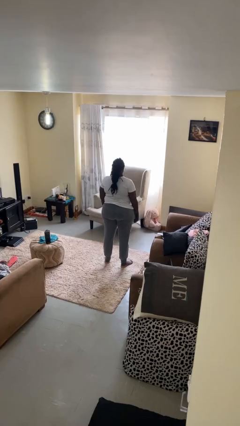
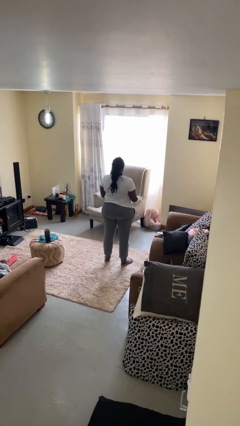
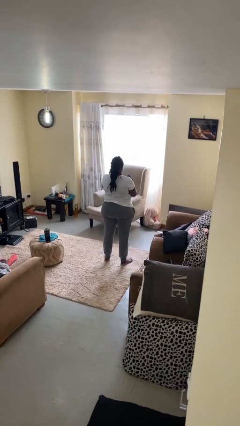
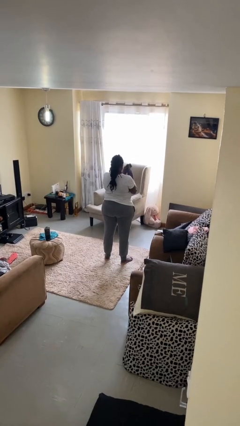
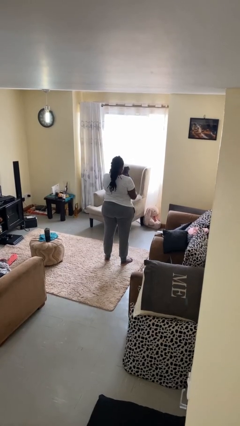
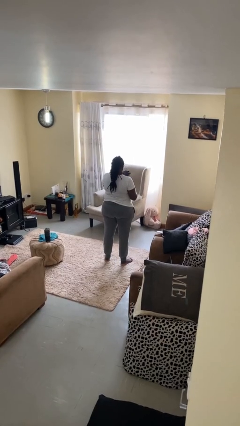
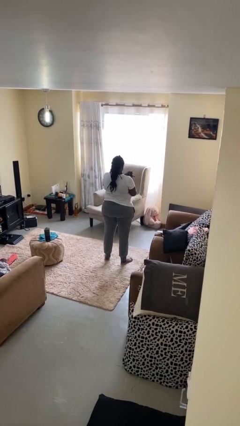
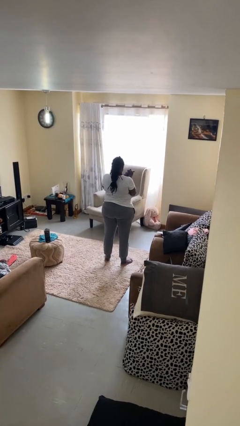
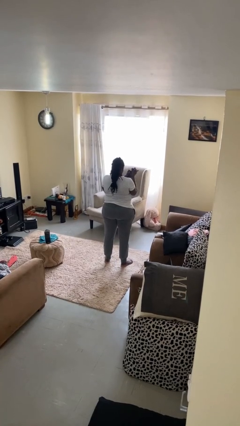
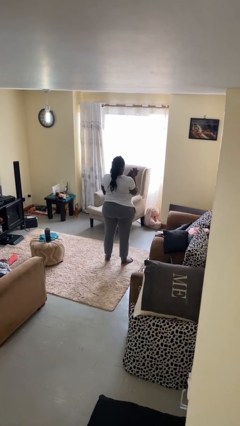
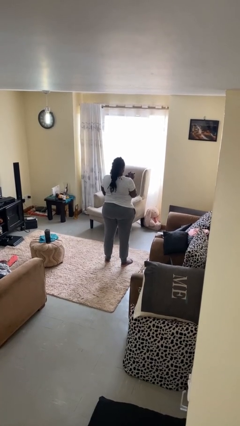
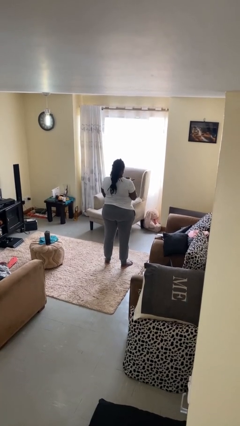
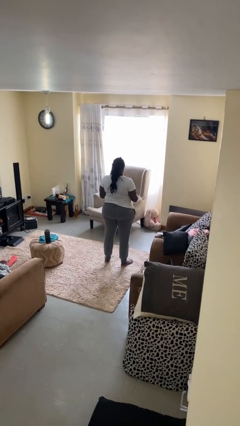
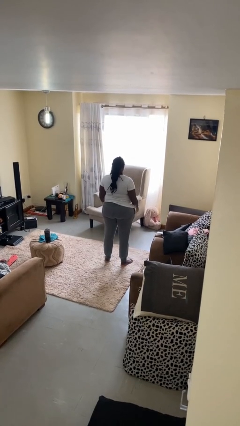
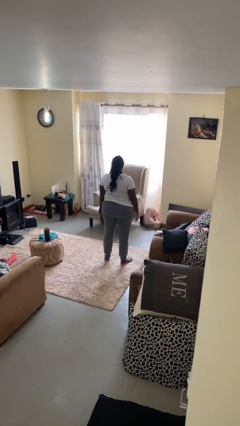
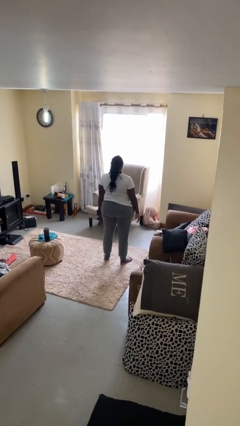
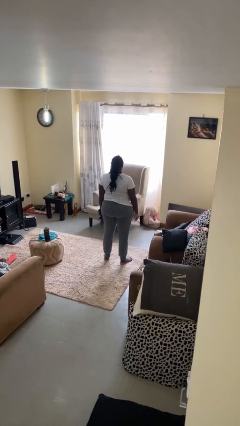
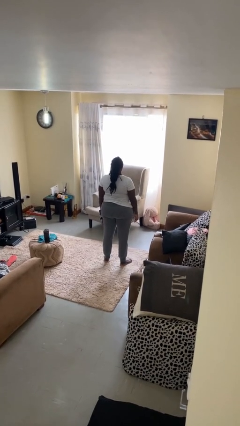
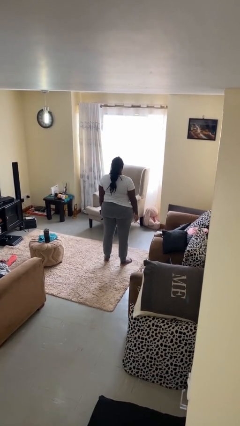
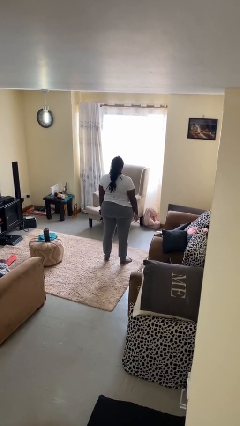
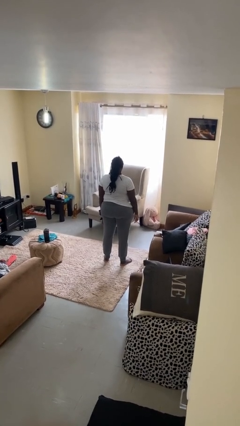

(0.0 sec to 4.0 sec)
person takes off gloves

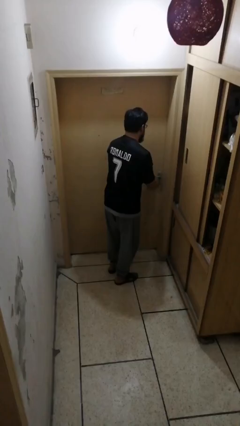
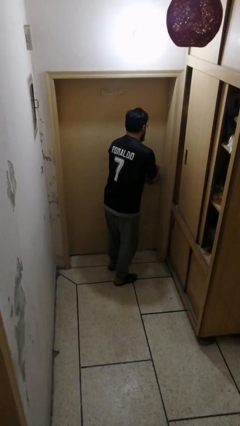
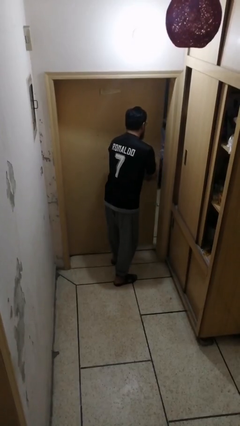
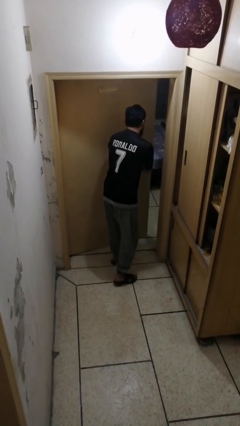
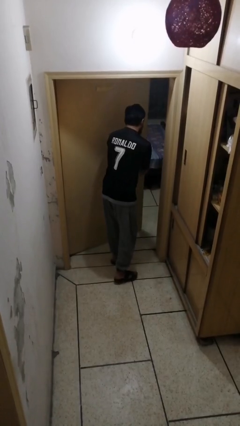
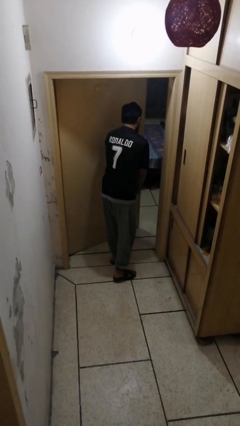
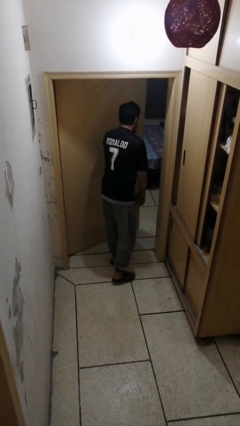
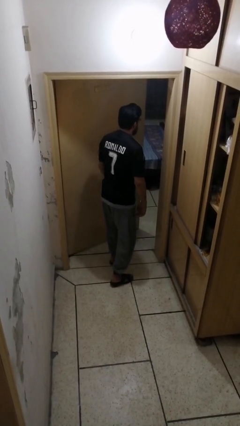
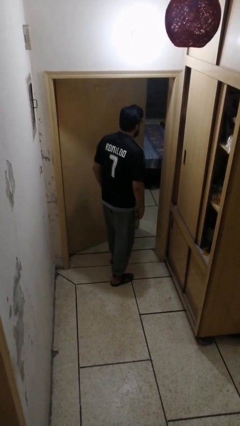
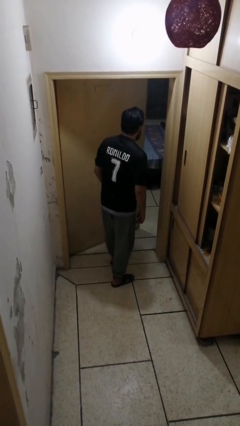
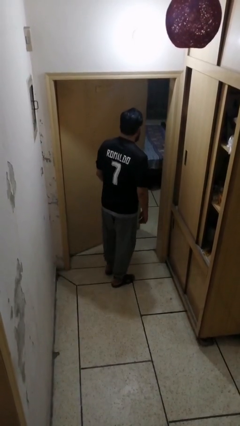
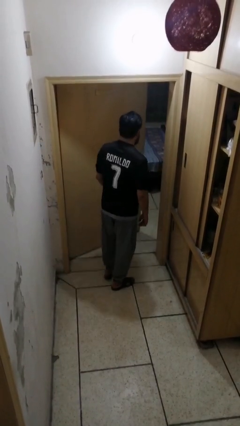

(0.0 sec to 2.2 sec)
person opens facility door

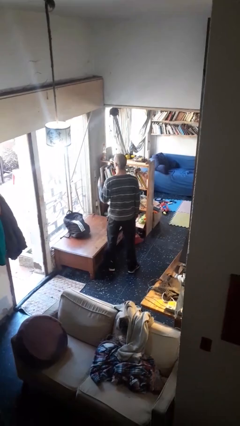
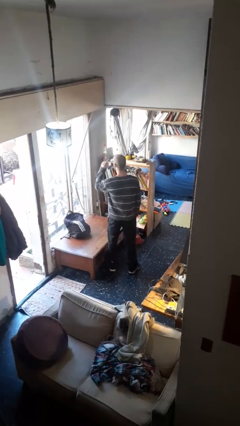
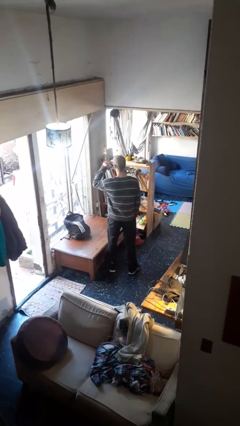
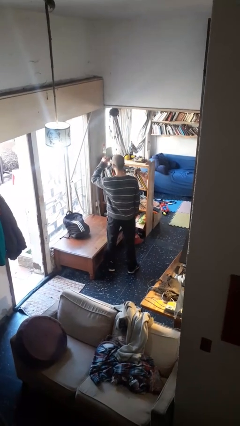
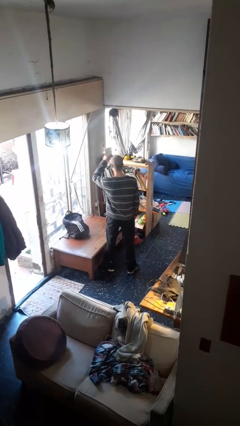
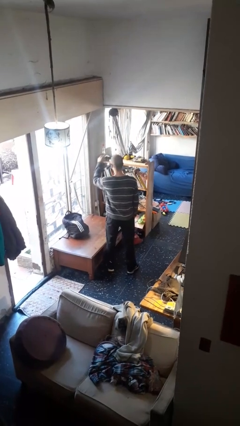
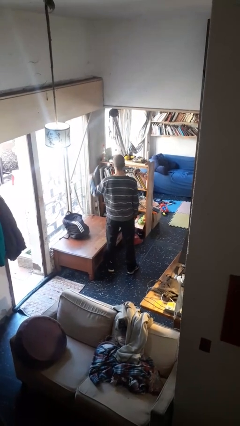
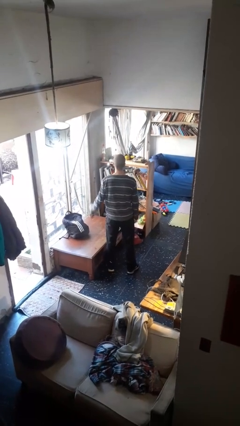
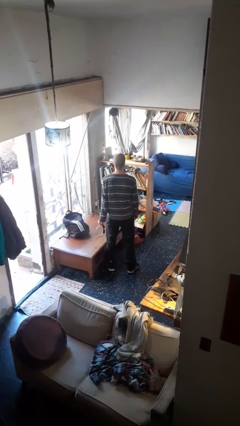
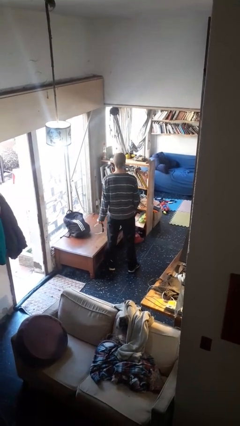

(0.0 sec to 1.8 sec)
person takes off sunglasses

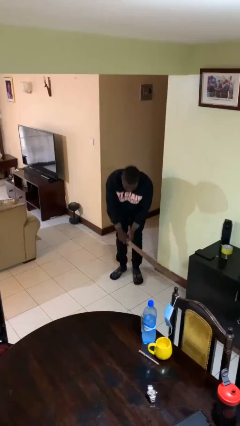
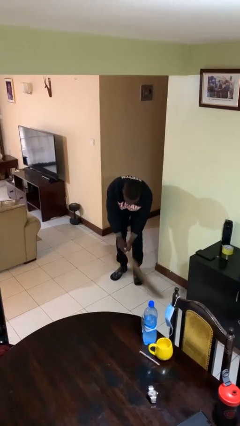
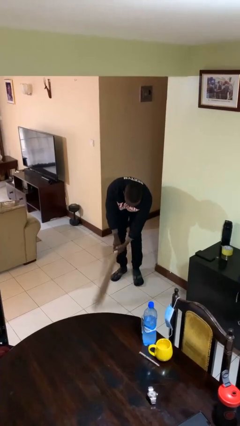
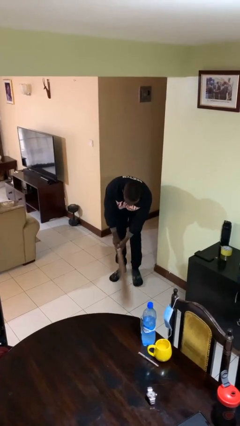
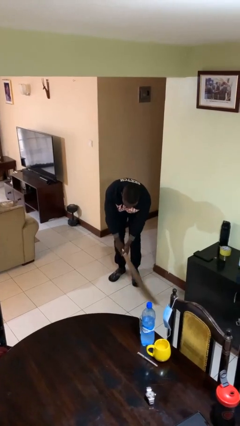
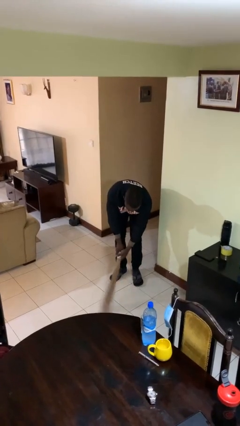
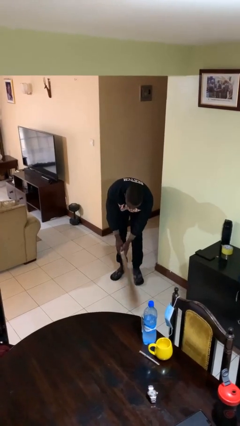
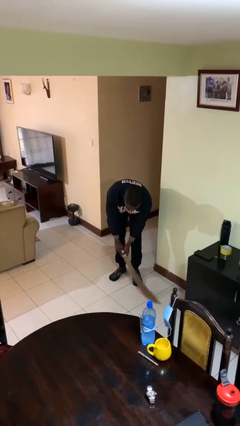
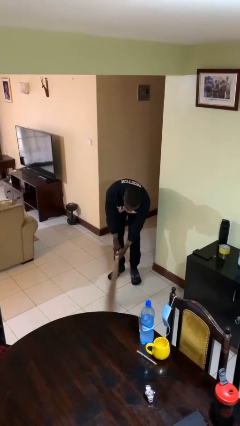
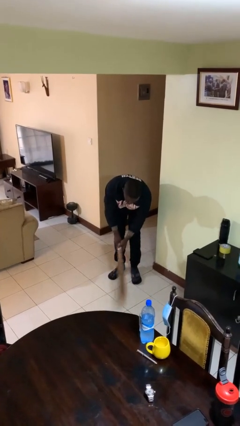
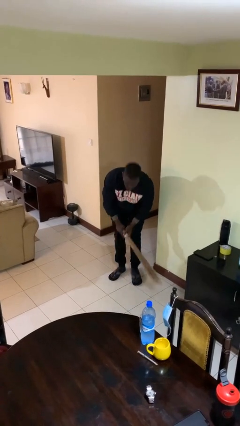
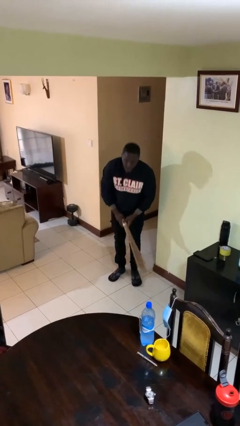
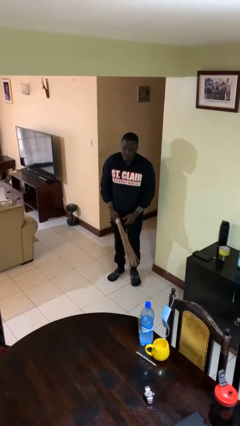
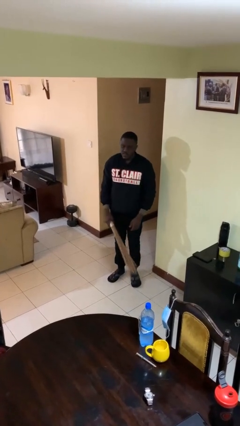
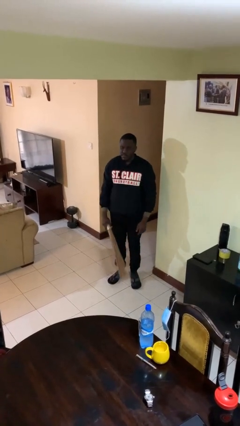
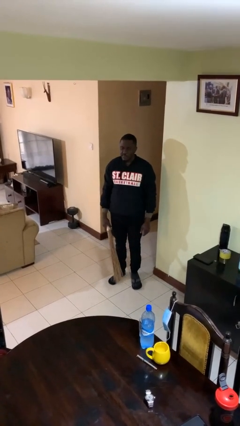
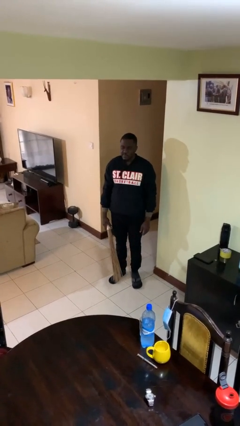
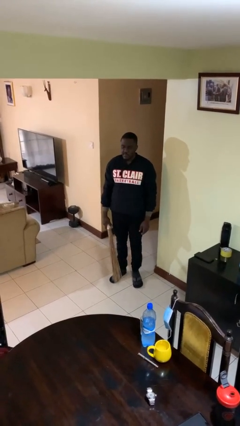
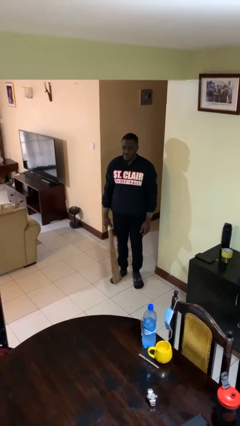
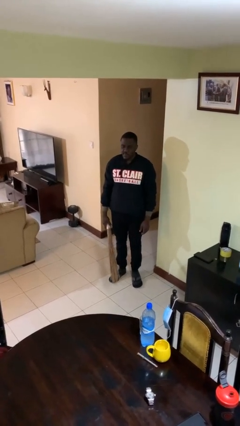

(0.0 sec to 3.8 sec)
person sweeps floor

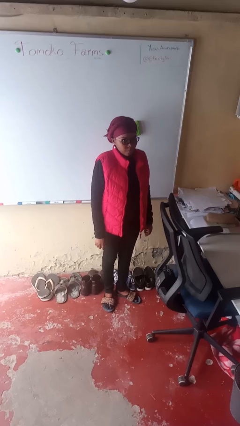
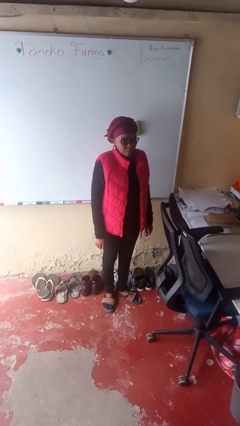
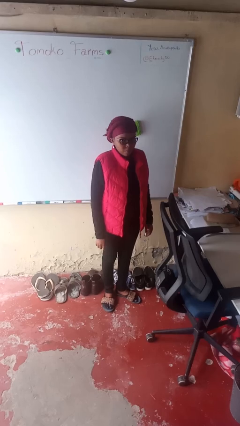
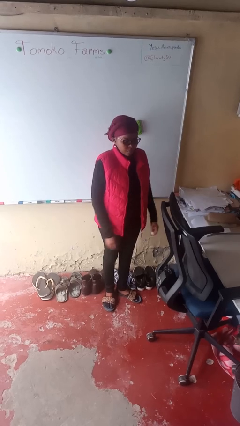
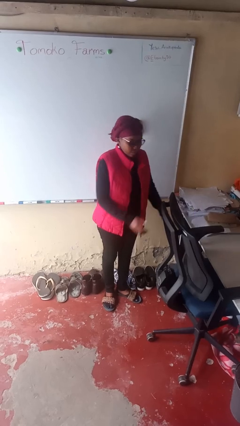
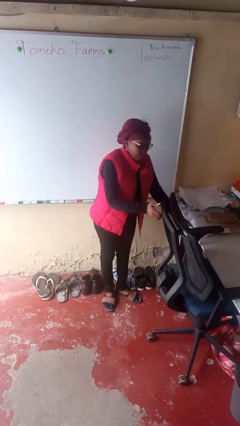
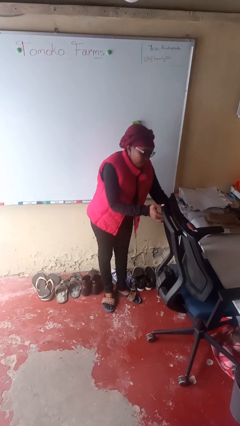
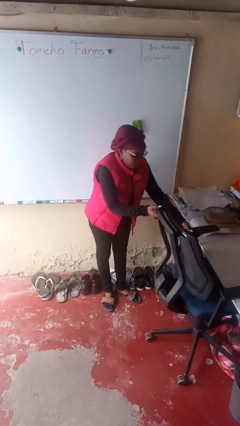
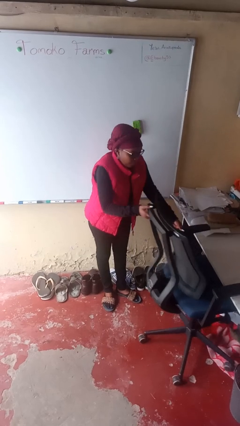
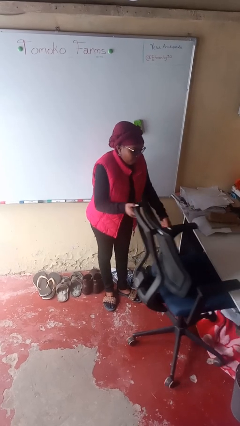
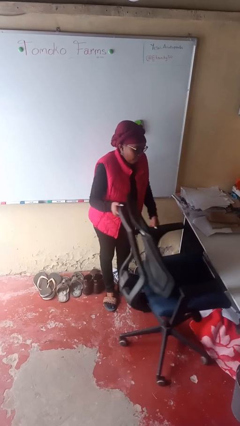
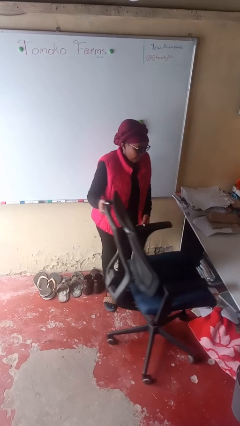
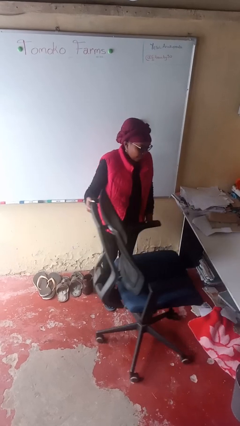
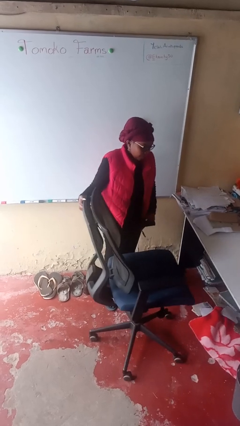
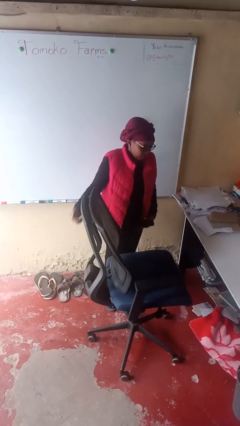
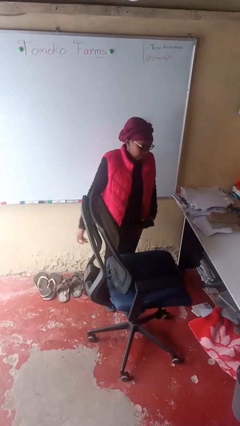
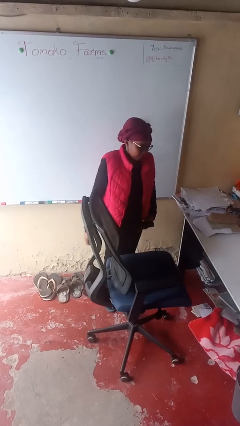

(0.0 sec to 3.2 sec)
person pulls out chair

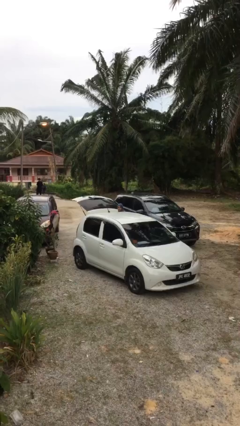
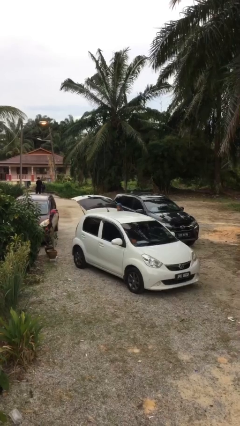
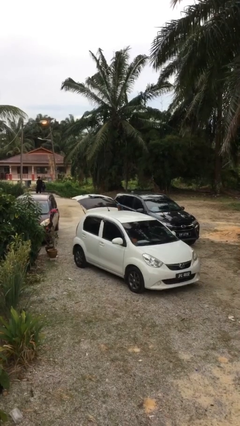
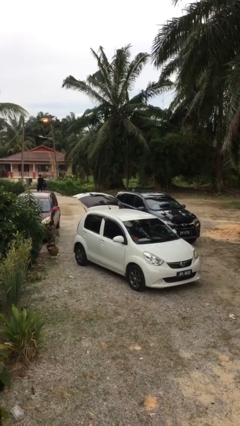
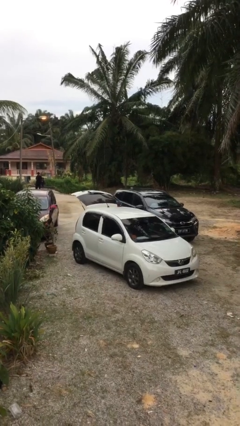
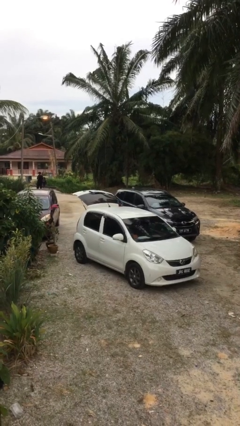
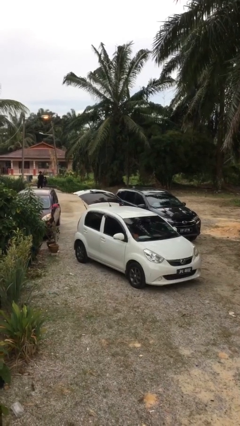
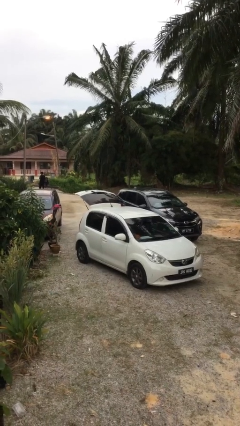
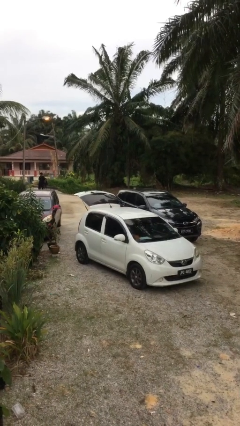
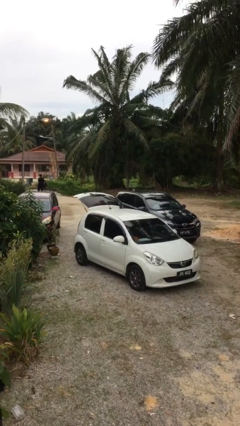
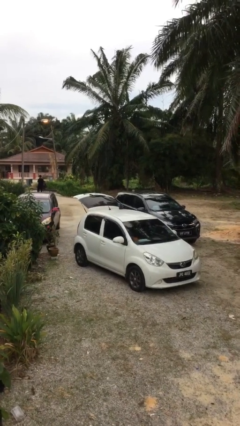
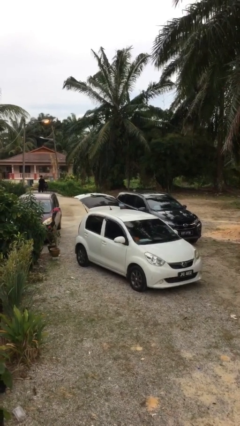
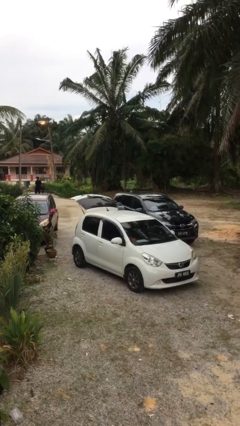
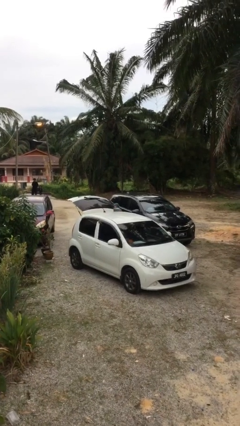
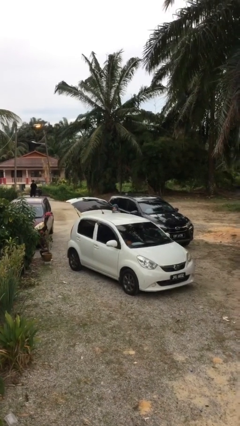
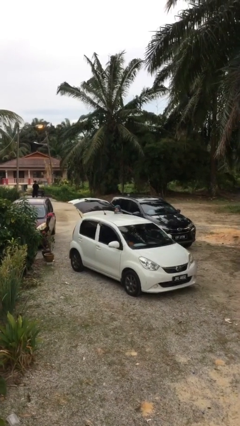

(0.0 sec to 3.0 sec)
person unloads car
